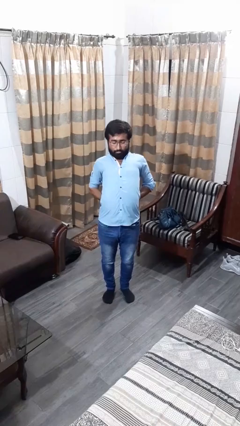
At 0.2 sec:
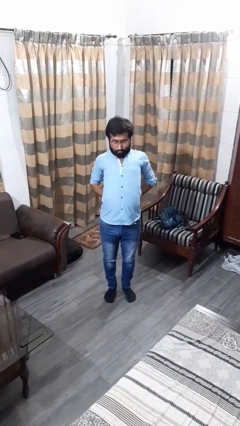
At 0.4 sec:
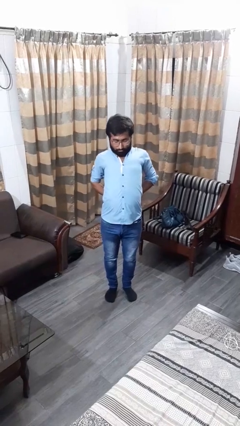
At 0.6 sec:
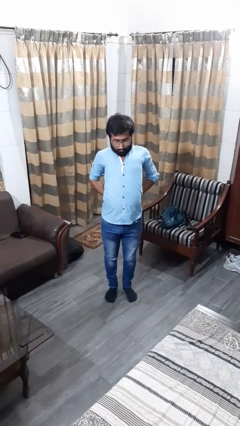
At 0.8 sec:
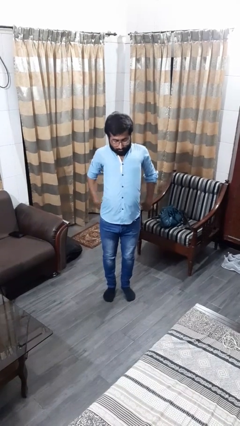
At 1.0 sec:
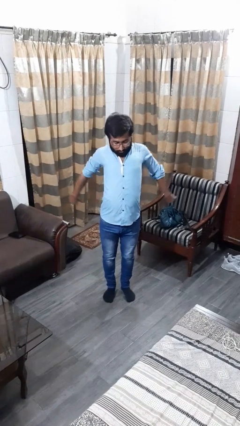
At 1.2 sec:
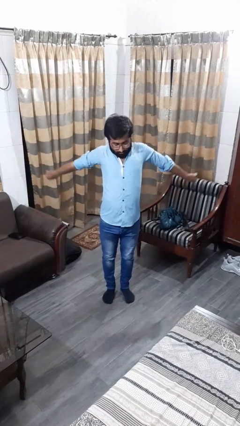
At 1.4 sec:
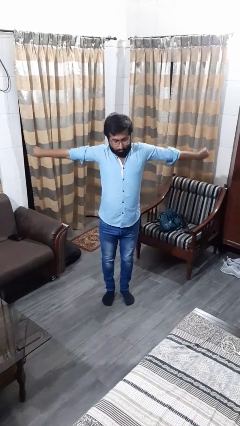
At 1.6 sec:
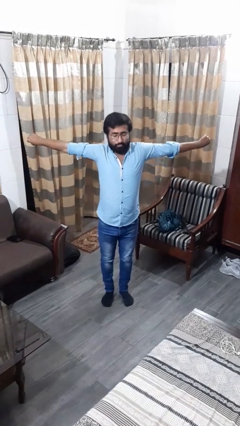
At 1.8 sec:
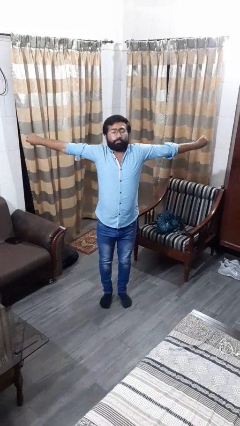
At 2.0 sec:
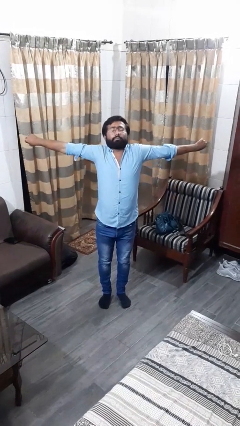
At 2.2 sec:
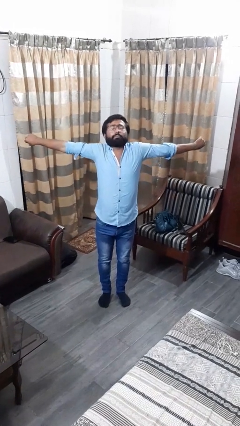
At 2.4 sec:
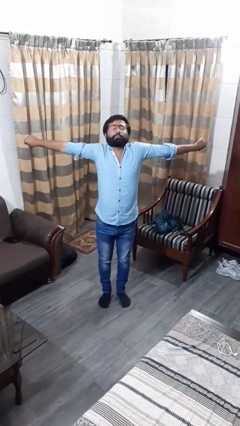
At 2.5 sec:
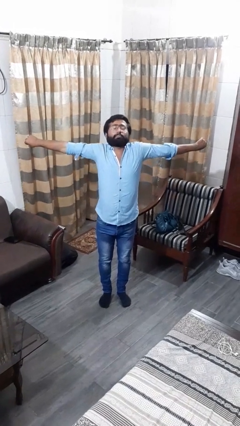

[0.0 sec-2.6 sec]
person stretches arms to side

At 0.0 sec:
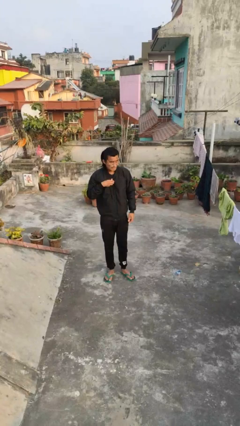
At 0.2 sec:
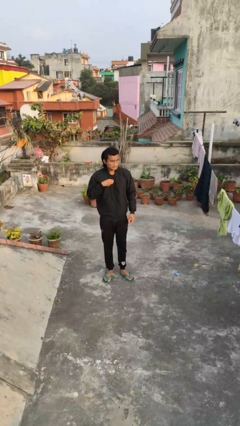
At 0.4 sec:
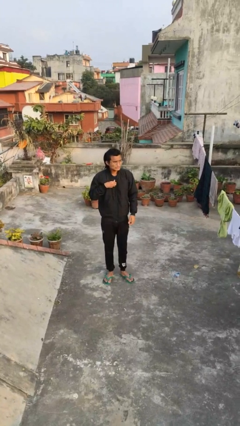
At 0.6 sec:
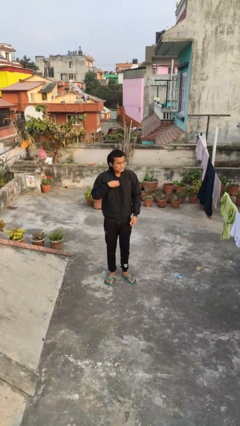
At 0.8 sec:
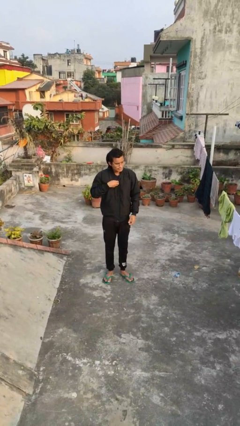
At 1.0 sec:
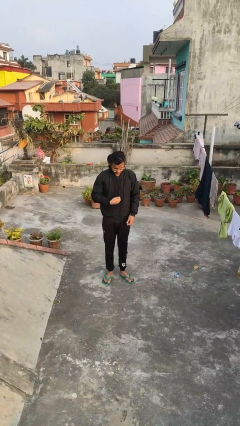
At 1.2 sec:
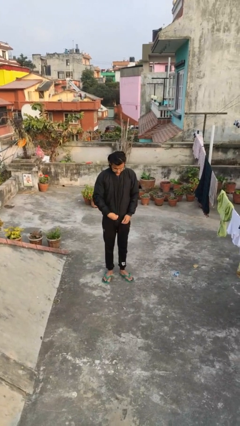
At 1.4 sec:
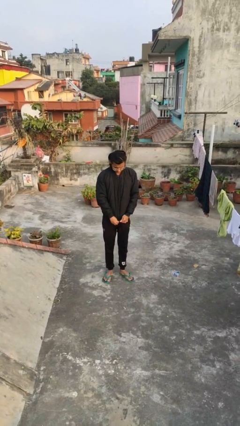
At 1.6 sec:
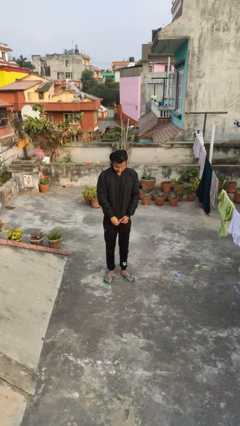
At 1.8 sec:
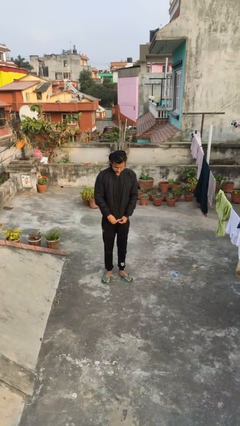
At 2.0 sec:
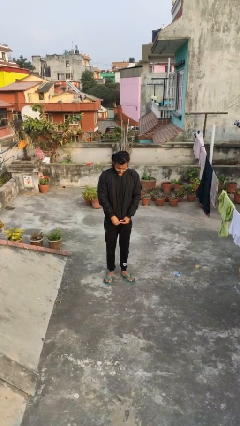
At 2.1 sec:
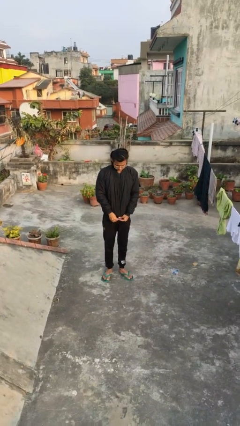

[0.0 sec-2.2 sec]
person unzips jacket

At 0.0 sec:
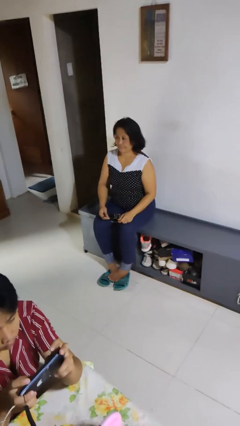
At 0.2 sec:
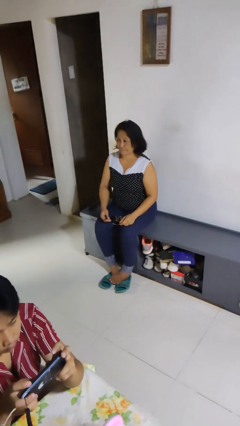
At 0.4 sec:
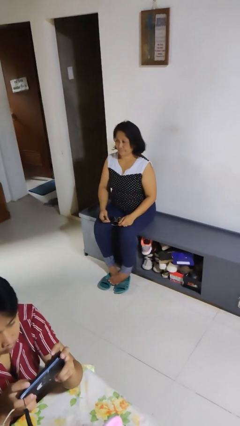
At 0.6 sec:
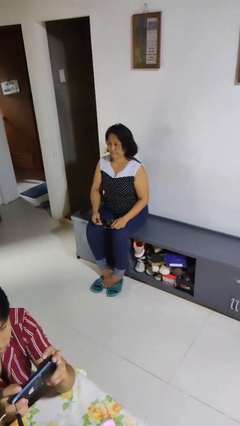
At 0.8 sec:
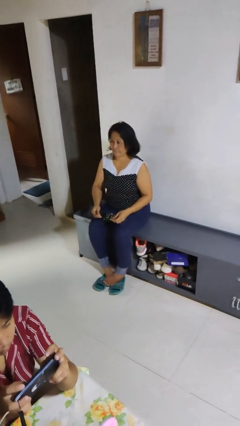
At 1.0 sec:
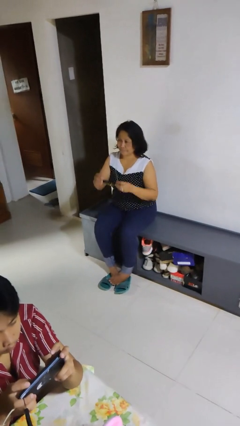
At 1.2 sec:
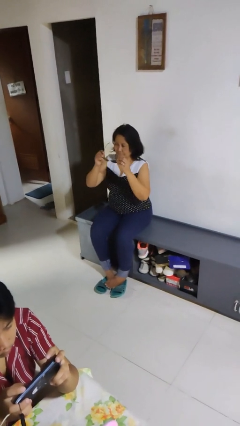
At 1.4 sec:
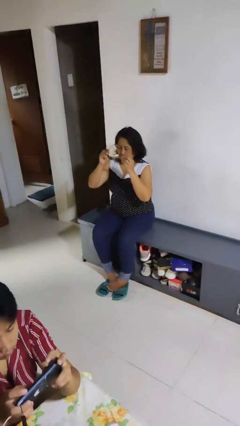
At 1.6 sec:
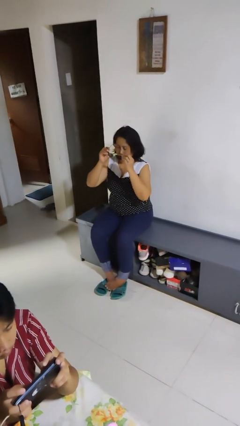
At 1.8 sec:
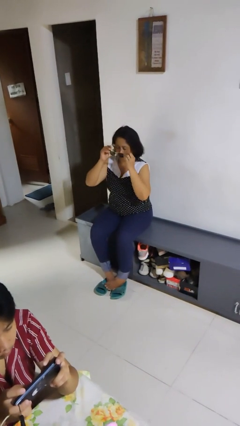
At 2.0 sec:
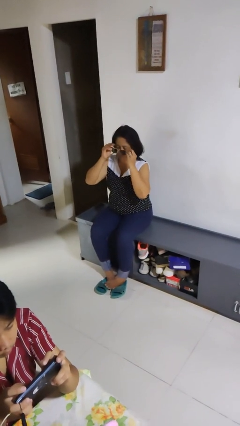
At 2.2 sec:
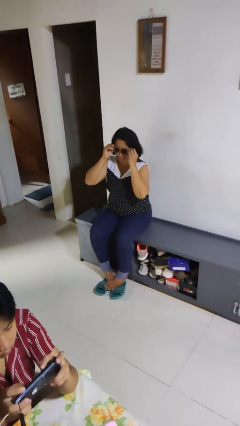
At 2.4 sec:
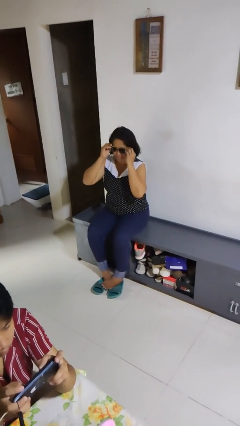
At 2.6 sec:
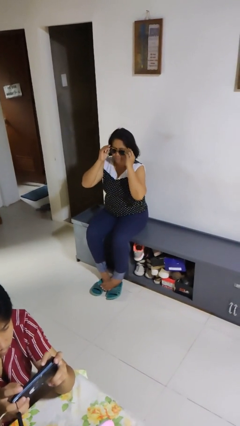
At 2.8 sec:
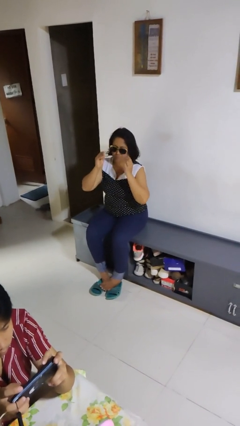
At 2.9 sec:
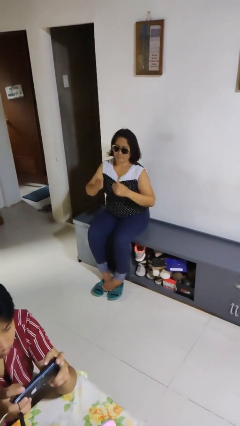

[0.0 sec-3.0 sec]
person puts on sunglasses

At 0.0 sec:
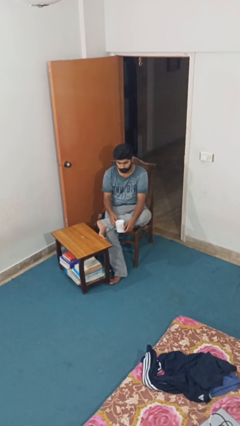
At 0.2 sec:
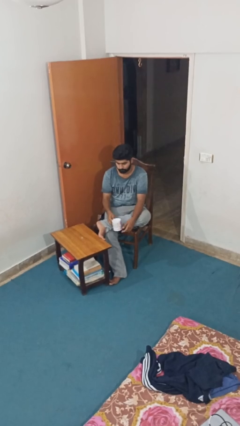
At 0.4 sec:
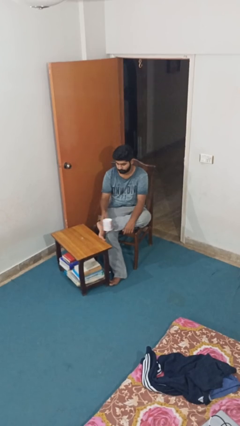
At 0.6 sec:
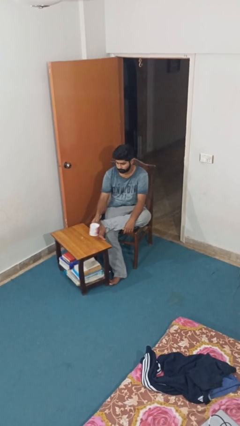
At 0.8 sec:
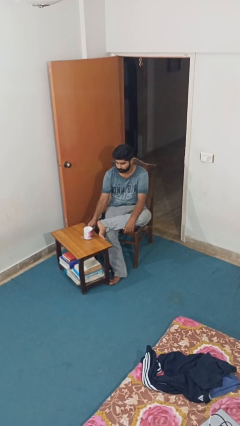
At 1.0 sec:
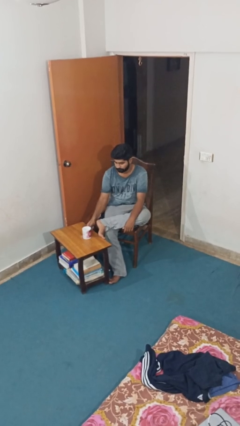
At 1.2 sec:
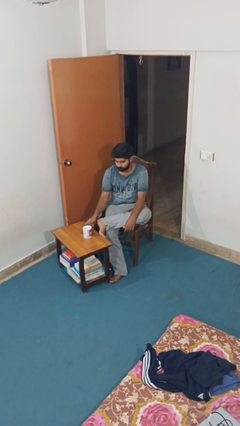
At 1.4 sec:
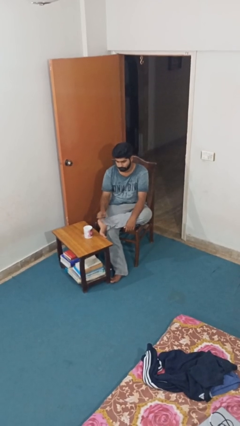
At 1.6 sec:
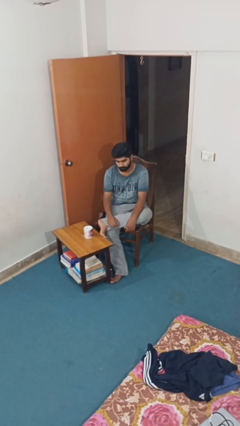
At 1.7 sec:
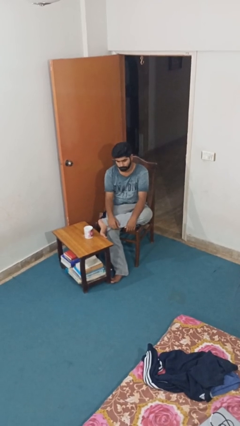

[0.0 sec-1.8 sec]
person puts down object on table

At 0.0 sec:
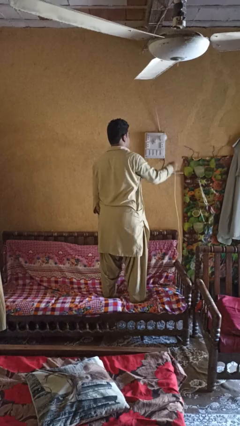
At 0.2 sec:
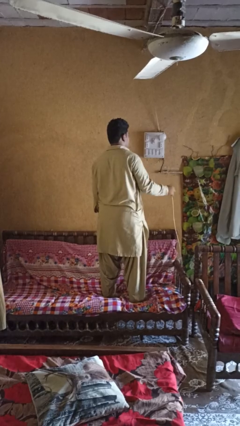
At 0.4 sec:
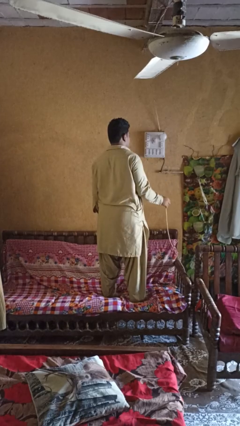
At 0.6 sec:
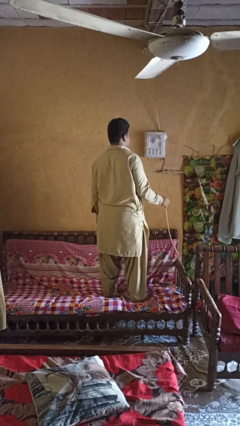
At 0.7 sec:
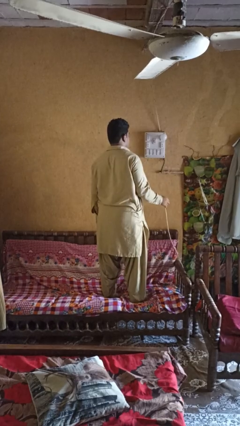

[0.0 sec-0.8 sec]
person unplugs from electrical socket

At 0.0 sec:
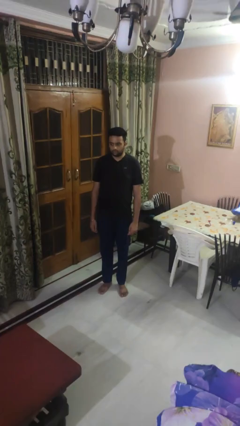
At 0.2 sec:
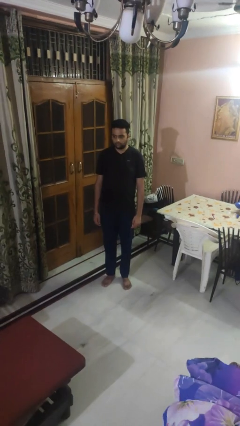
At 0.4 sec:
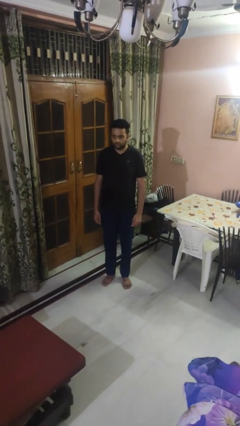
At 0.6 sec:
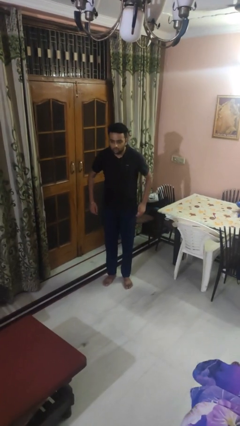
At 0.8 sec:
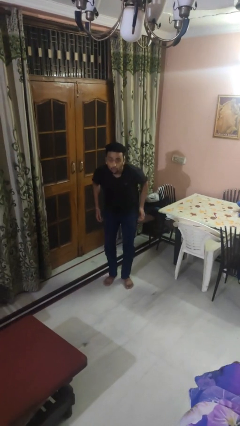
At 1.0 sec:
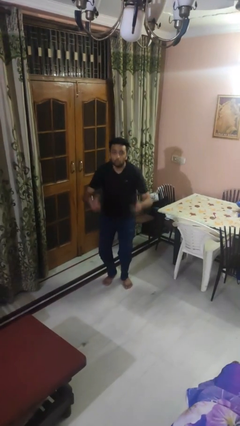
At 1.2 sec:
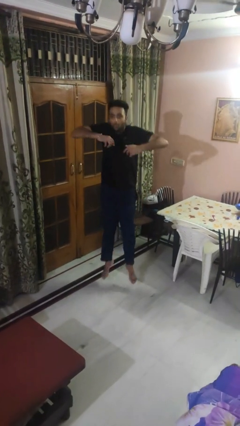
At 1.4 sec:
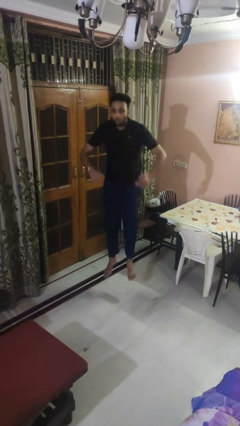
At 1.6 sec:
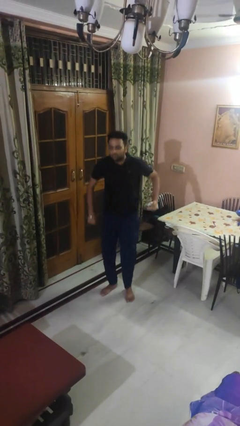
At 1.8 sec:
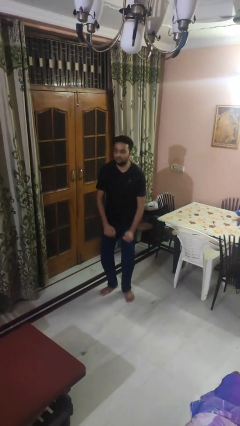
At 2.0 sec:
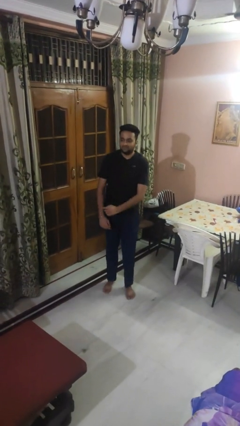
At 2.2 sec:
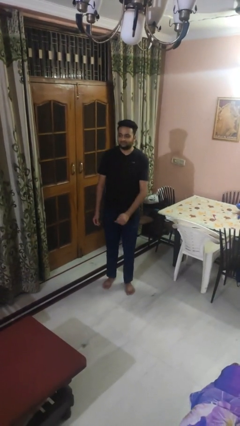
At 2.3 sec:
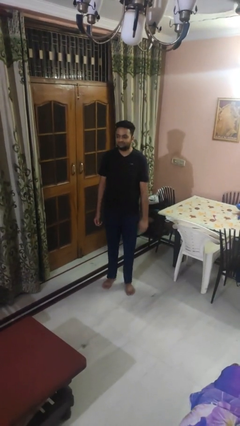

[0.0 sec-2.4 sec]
person jumps

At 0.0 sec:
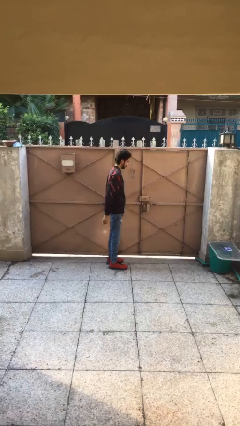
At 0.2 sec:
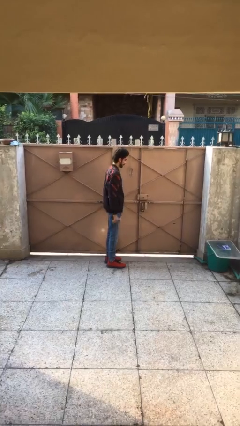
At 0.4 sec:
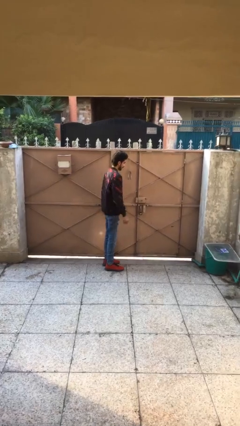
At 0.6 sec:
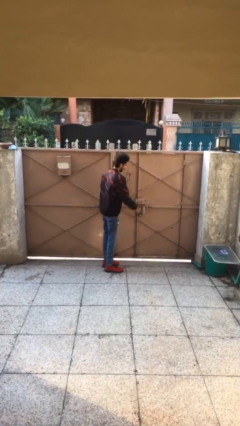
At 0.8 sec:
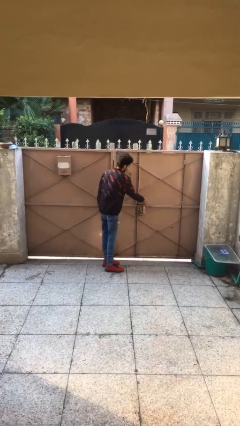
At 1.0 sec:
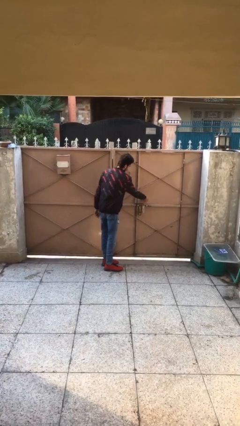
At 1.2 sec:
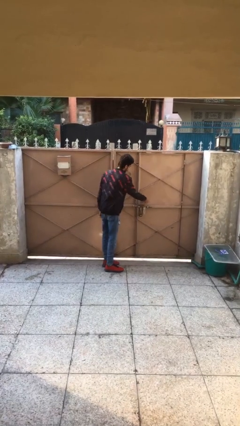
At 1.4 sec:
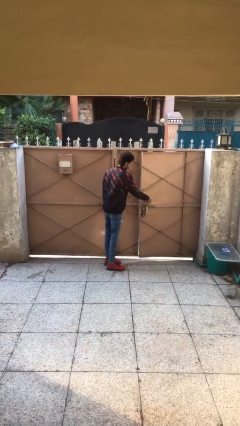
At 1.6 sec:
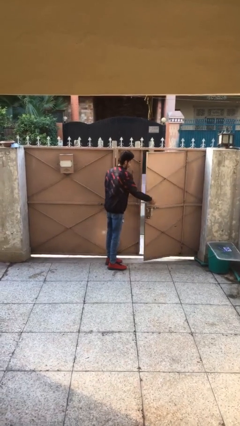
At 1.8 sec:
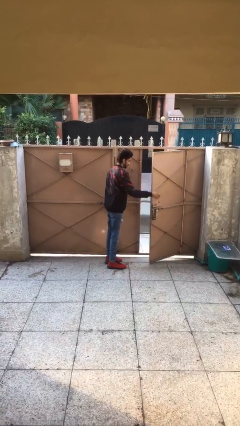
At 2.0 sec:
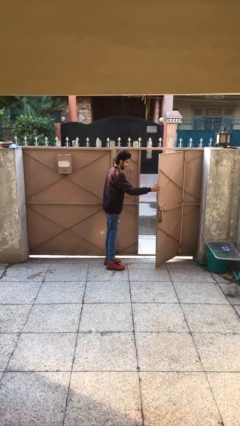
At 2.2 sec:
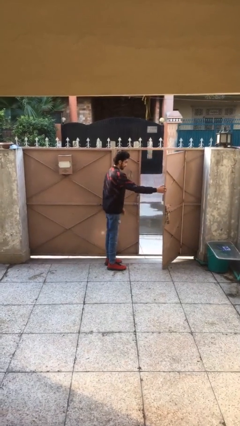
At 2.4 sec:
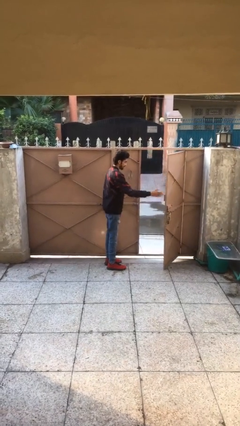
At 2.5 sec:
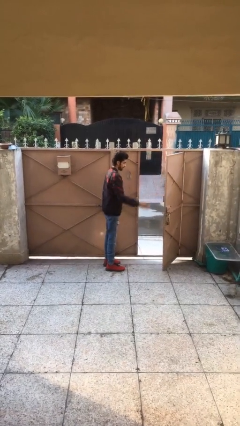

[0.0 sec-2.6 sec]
person opens facility door

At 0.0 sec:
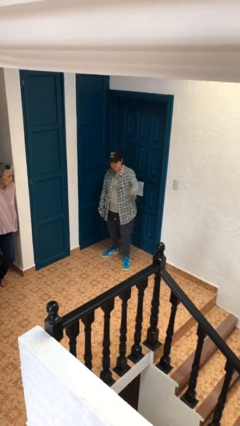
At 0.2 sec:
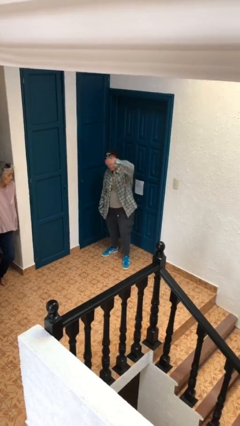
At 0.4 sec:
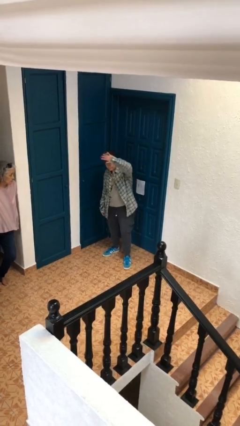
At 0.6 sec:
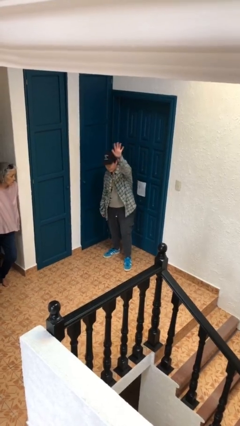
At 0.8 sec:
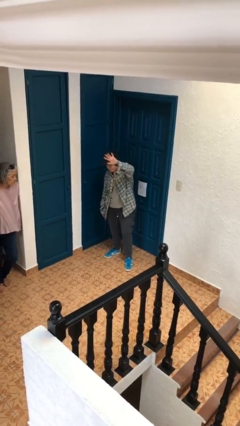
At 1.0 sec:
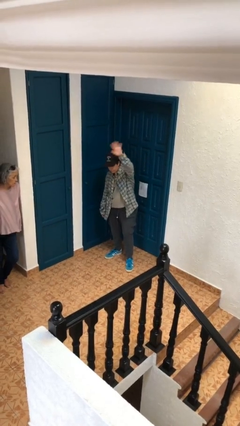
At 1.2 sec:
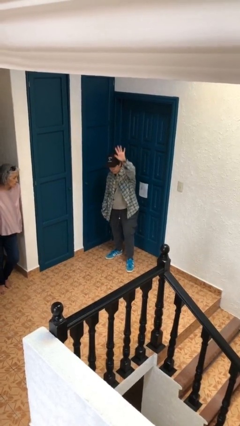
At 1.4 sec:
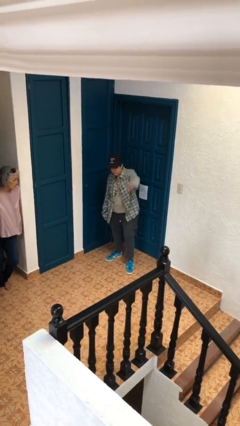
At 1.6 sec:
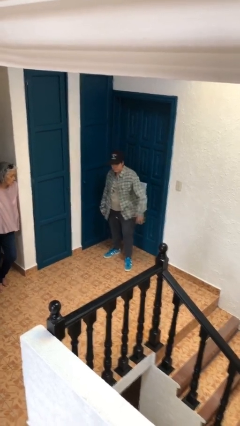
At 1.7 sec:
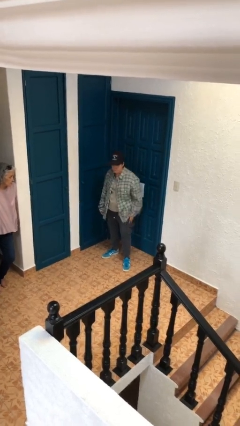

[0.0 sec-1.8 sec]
person waves at person
